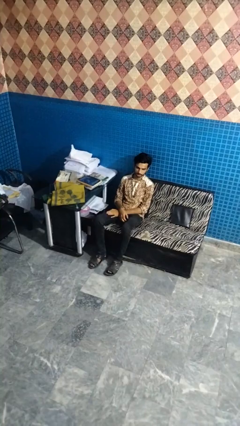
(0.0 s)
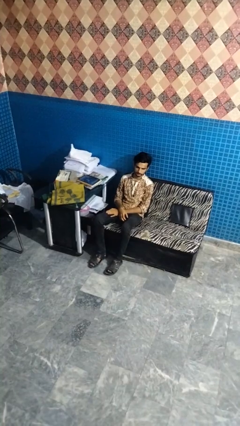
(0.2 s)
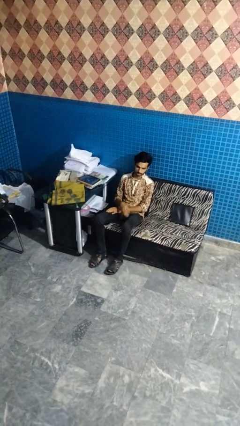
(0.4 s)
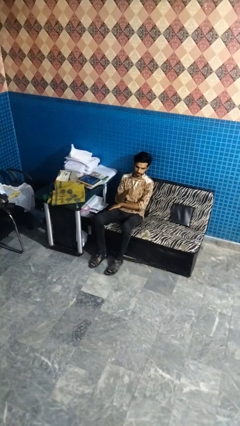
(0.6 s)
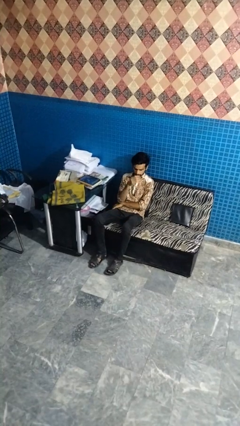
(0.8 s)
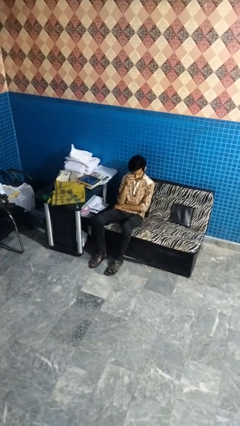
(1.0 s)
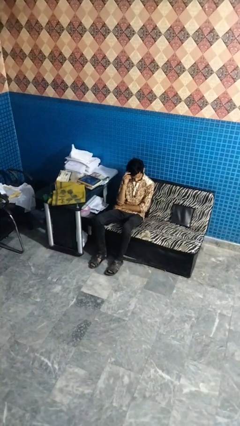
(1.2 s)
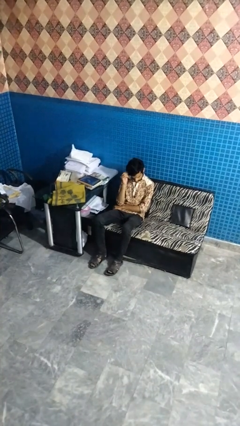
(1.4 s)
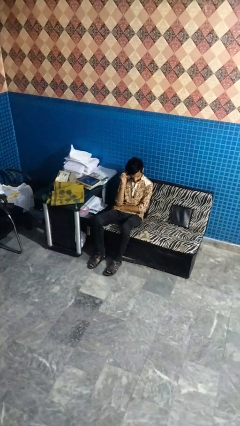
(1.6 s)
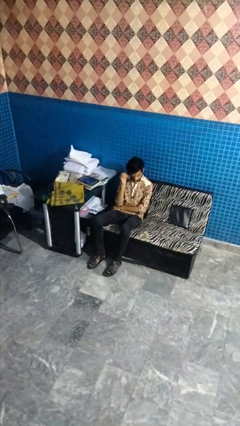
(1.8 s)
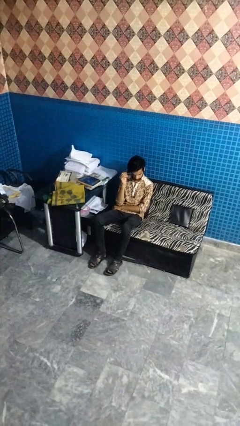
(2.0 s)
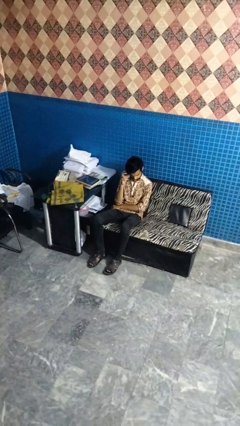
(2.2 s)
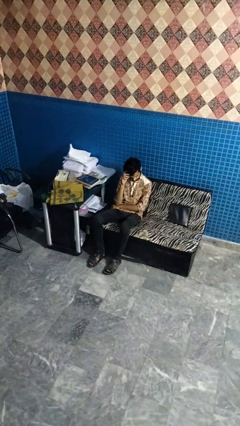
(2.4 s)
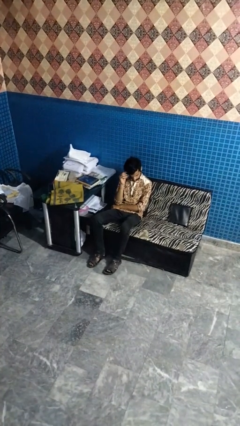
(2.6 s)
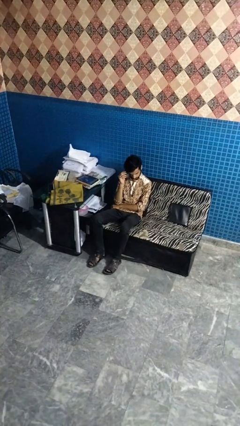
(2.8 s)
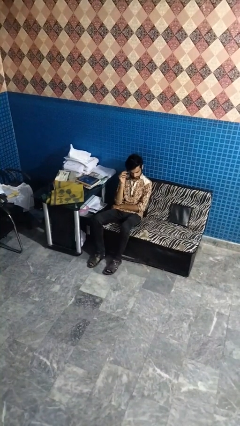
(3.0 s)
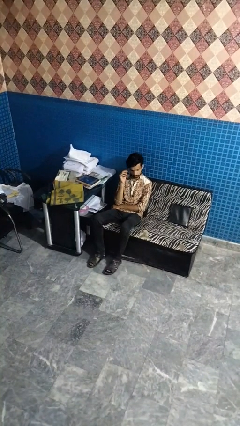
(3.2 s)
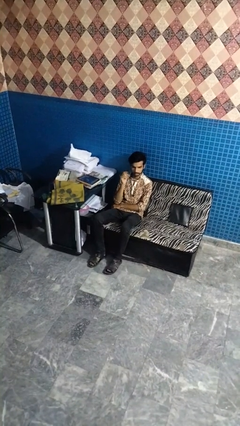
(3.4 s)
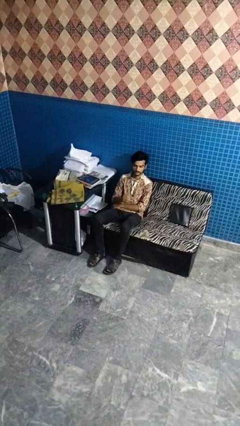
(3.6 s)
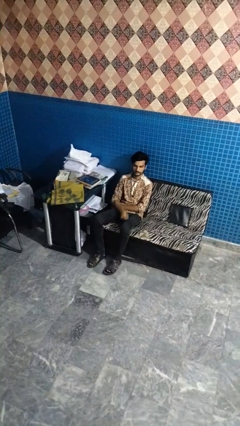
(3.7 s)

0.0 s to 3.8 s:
person strokes hair

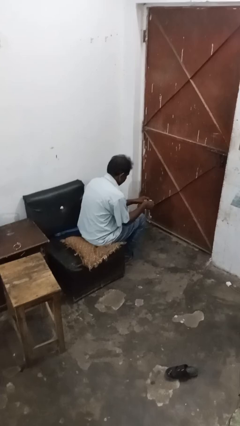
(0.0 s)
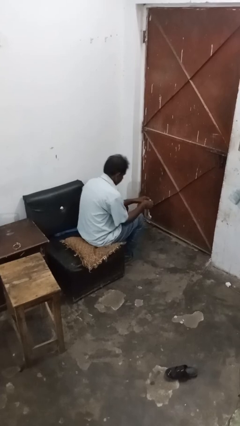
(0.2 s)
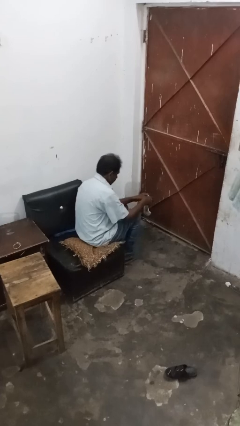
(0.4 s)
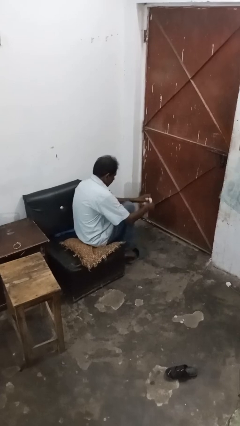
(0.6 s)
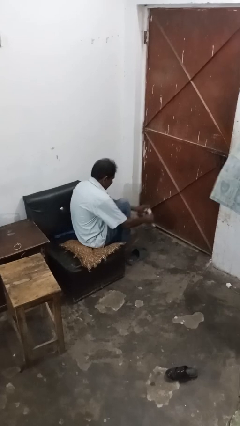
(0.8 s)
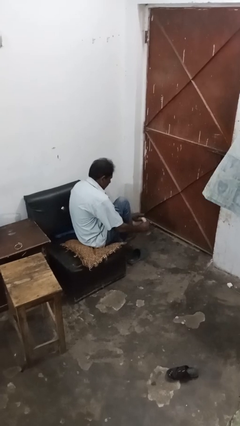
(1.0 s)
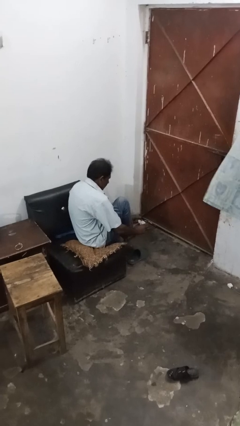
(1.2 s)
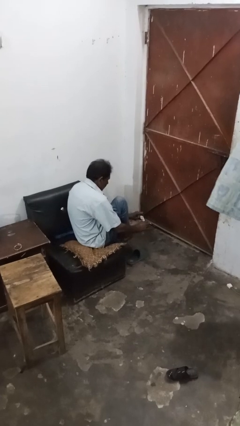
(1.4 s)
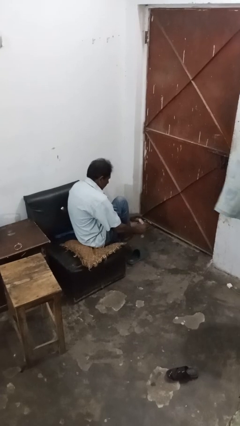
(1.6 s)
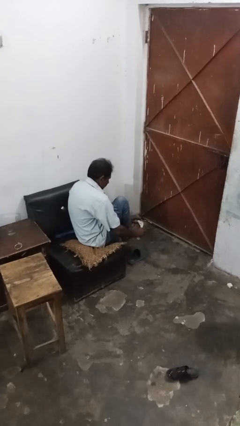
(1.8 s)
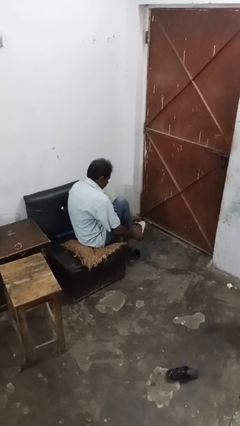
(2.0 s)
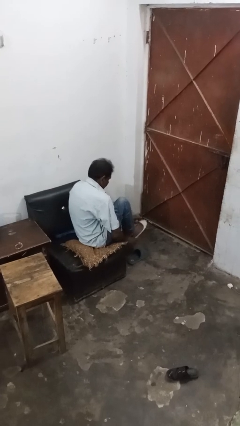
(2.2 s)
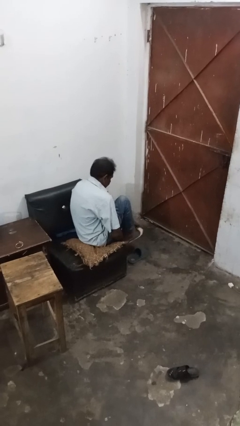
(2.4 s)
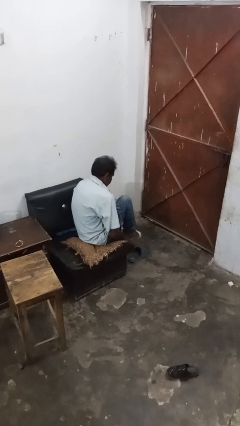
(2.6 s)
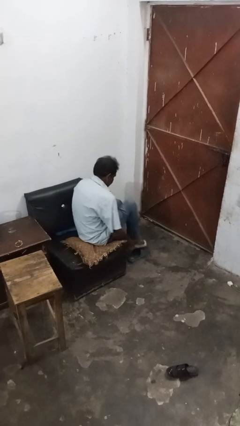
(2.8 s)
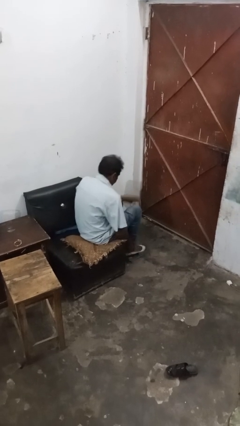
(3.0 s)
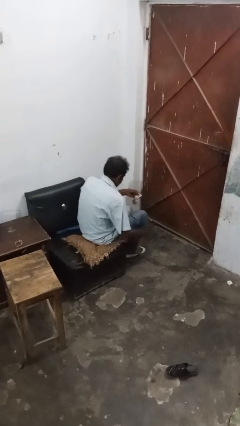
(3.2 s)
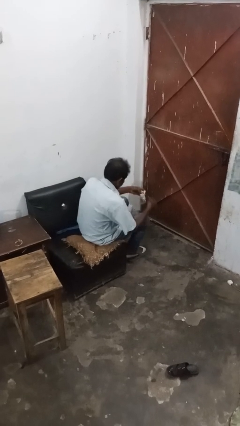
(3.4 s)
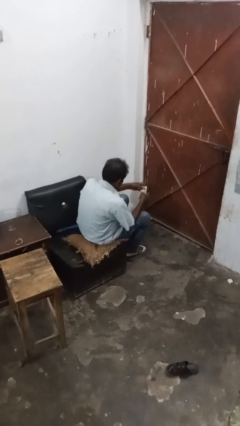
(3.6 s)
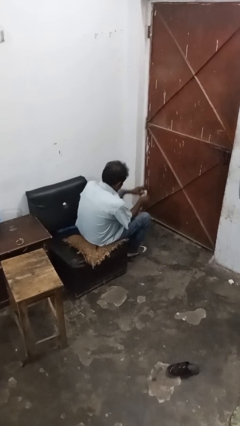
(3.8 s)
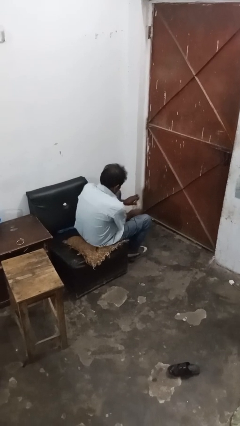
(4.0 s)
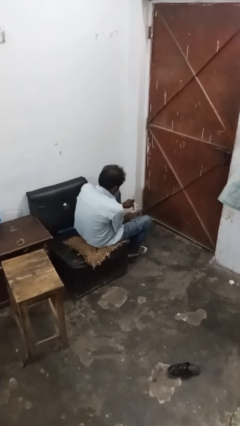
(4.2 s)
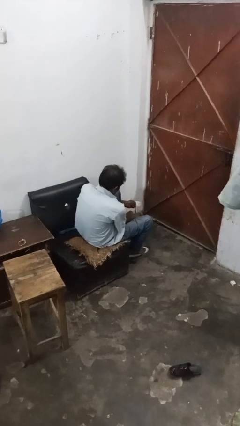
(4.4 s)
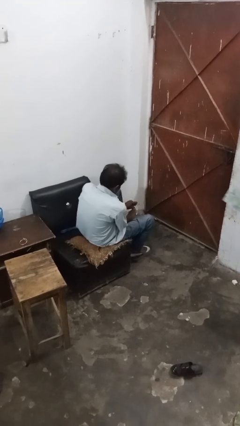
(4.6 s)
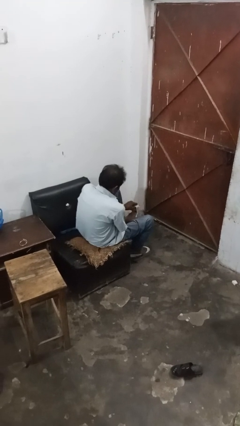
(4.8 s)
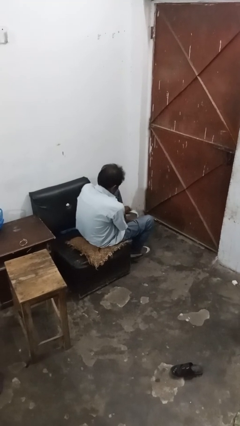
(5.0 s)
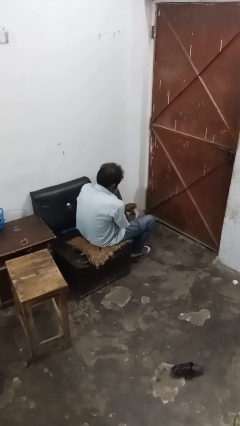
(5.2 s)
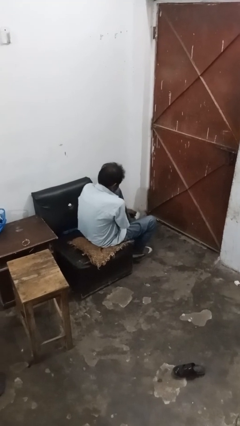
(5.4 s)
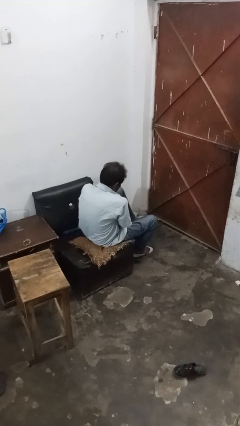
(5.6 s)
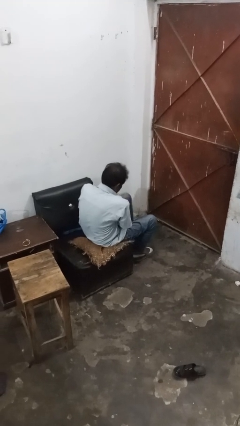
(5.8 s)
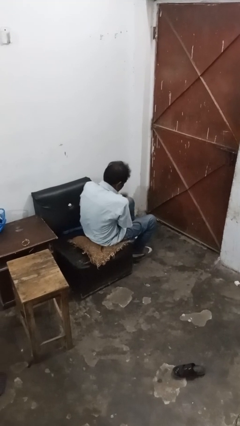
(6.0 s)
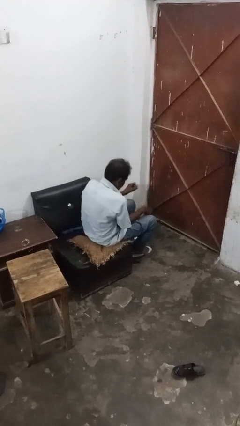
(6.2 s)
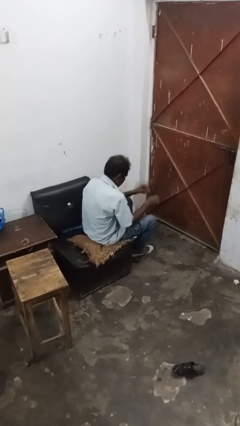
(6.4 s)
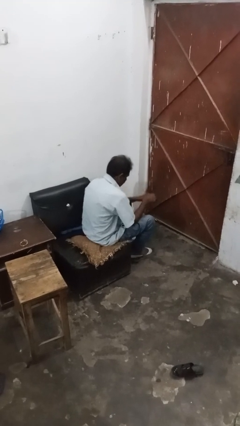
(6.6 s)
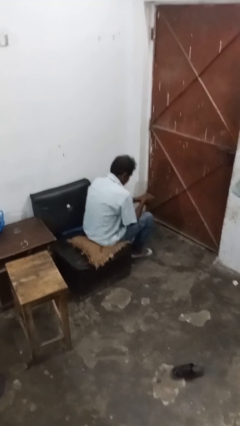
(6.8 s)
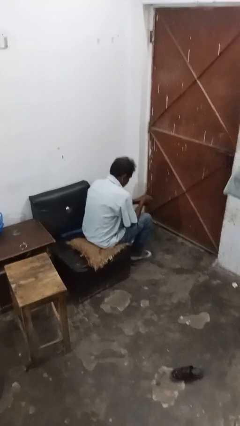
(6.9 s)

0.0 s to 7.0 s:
person puts on socks

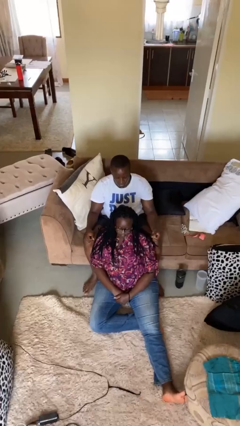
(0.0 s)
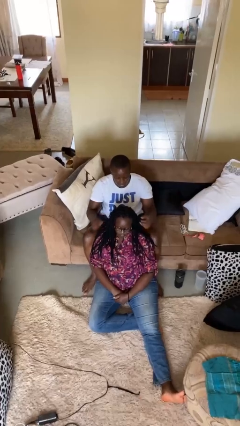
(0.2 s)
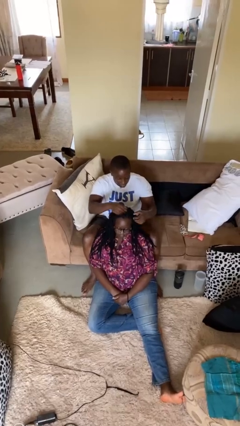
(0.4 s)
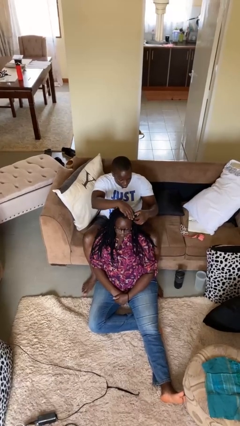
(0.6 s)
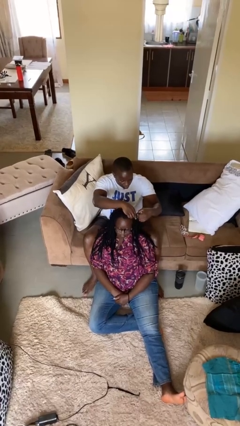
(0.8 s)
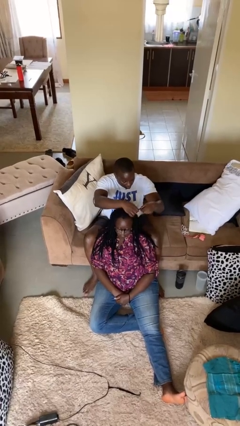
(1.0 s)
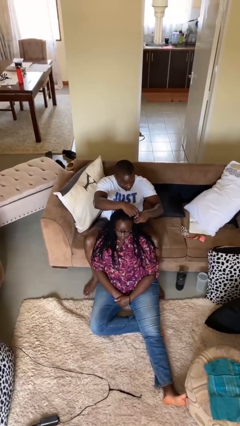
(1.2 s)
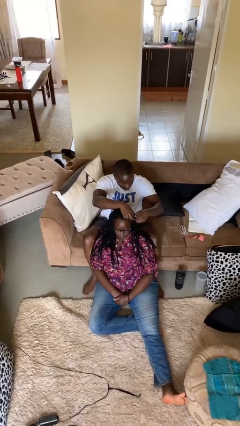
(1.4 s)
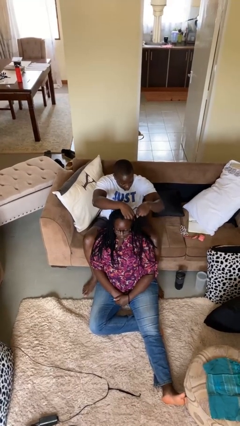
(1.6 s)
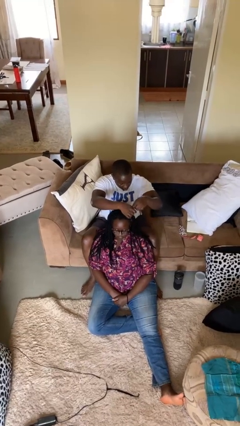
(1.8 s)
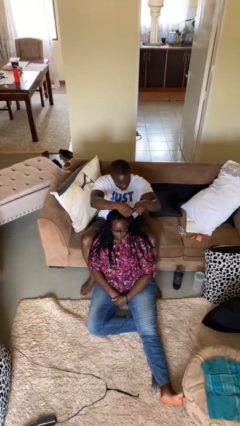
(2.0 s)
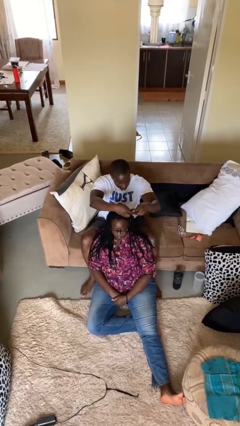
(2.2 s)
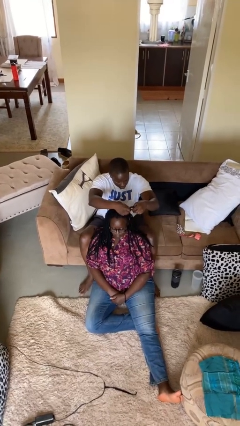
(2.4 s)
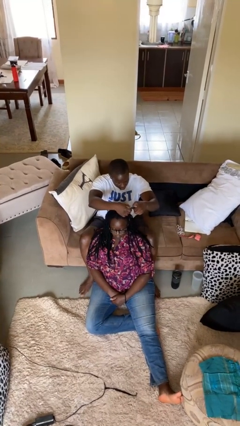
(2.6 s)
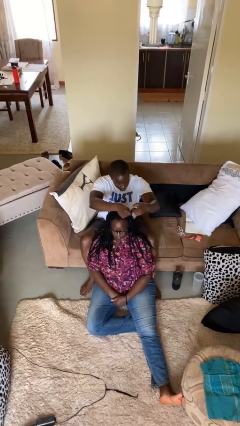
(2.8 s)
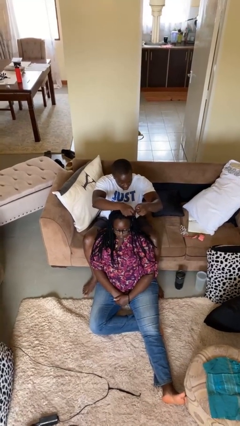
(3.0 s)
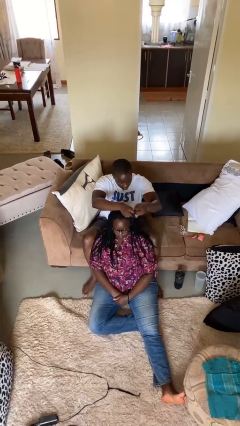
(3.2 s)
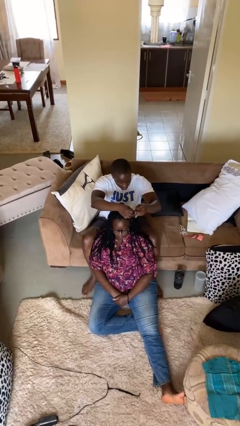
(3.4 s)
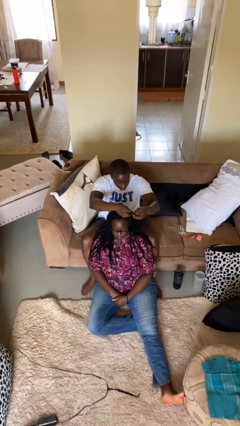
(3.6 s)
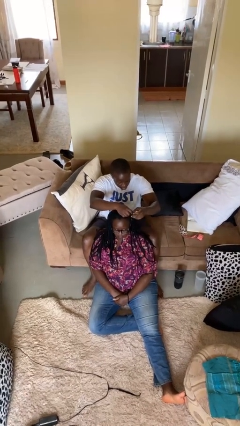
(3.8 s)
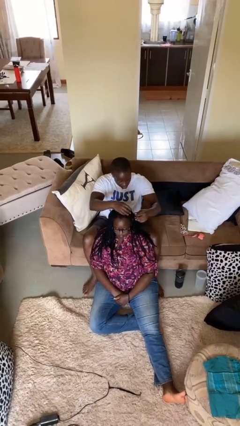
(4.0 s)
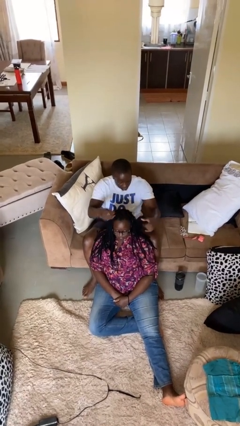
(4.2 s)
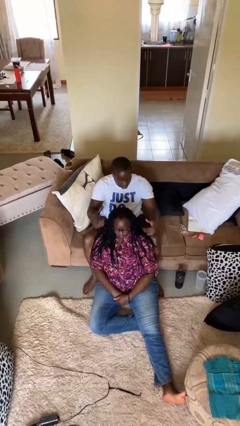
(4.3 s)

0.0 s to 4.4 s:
person braids hair of person

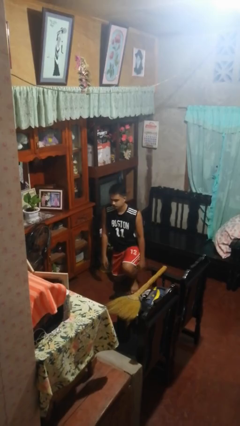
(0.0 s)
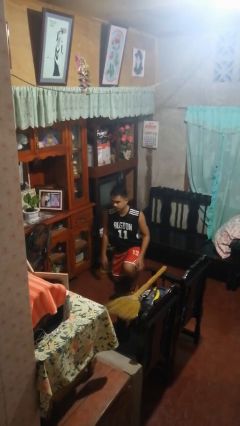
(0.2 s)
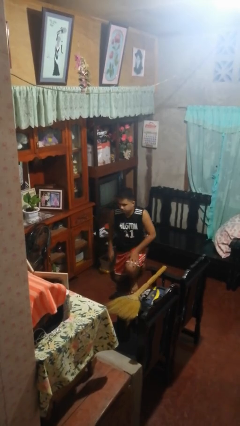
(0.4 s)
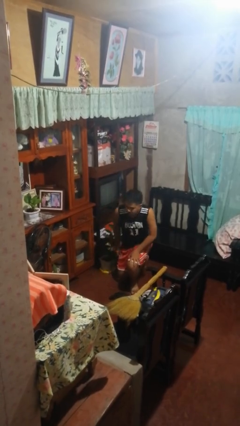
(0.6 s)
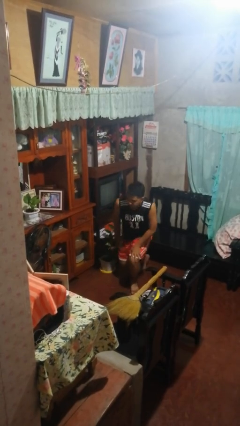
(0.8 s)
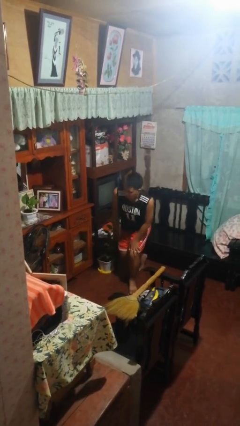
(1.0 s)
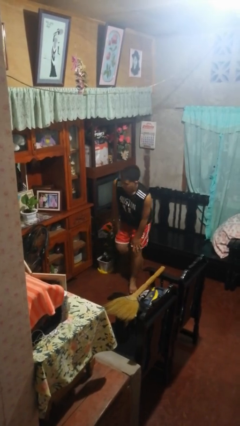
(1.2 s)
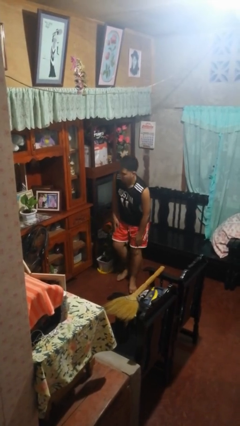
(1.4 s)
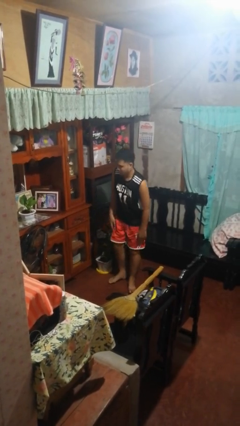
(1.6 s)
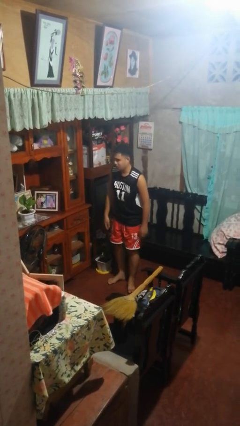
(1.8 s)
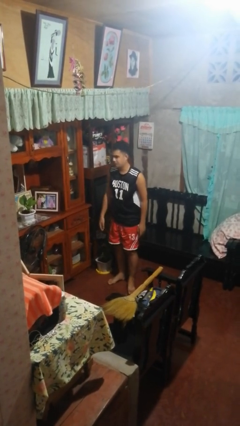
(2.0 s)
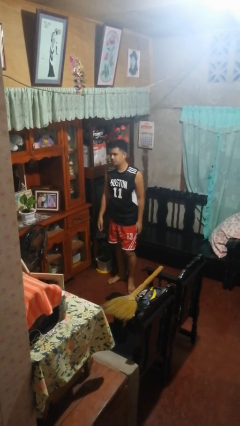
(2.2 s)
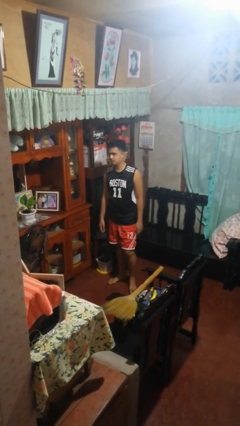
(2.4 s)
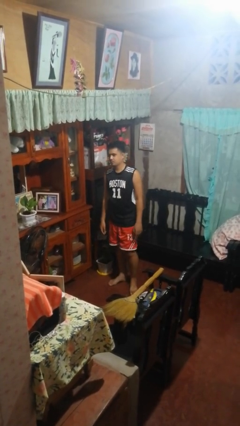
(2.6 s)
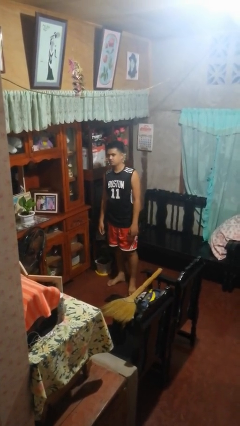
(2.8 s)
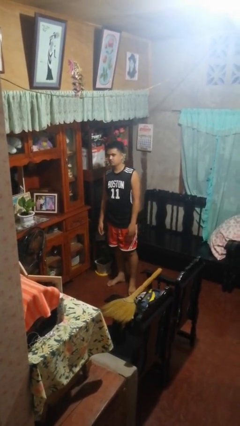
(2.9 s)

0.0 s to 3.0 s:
person stands up from floor
